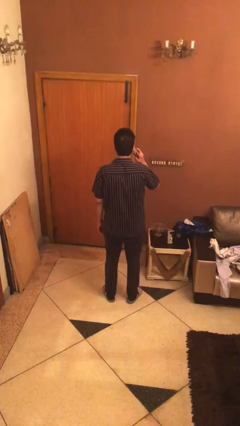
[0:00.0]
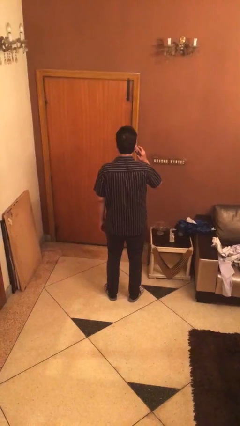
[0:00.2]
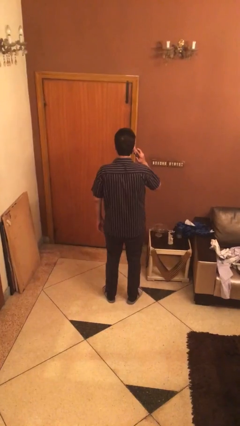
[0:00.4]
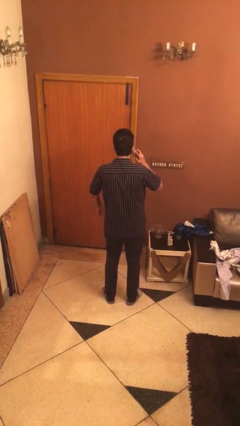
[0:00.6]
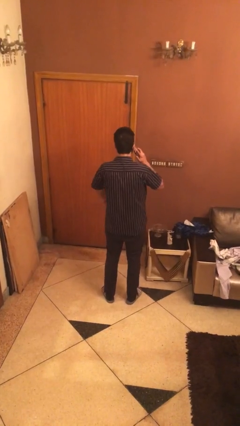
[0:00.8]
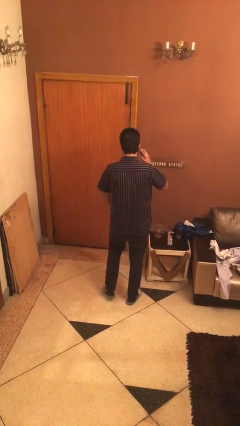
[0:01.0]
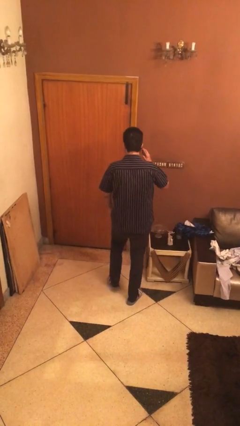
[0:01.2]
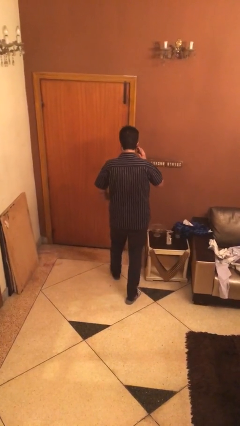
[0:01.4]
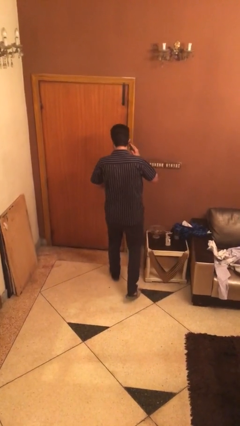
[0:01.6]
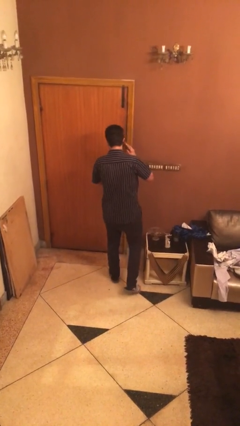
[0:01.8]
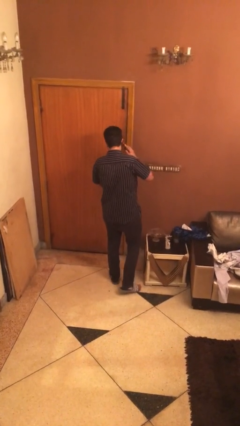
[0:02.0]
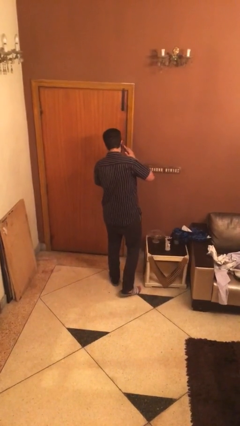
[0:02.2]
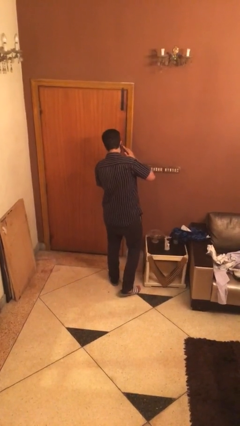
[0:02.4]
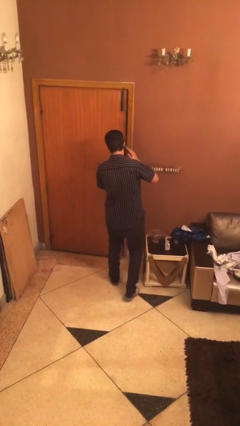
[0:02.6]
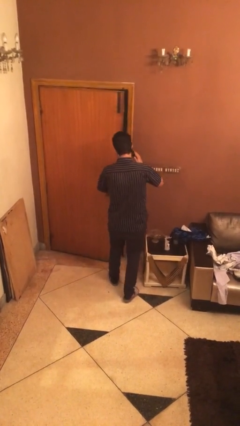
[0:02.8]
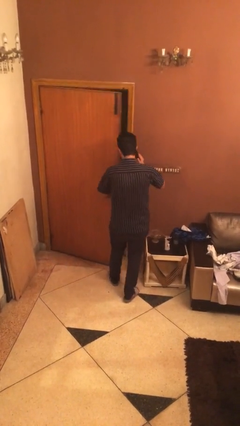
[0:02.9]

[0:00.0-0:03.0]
person opens facility door

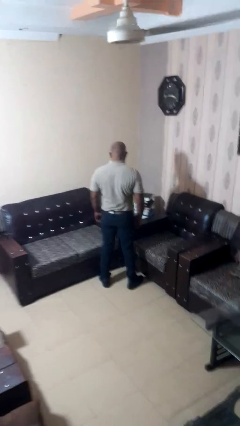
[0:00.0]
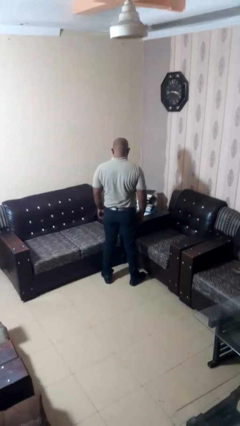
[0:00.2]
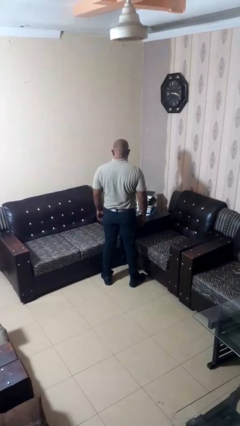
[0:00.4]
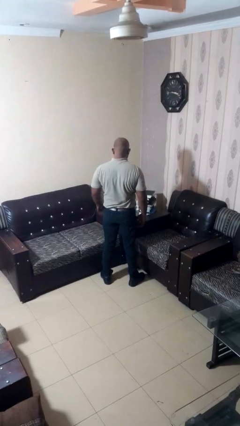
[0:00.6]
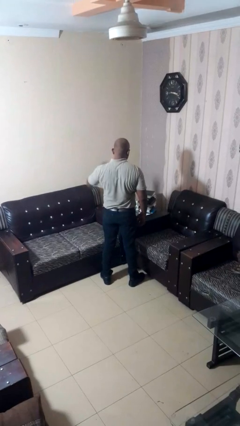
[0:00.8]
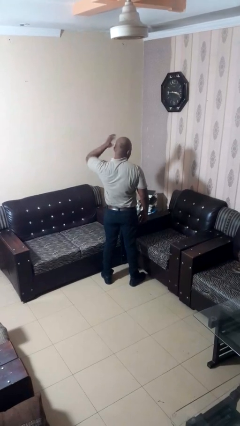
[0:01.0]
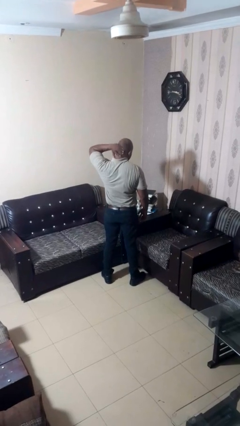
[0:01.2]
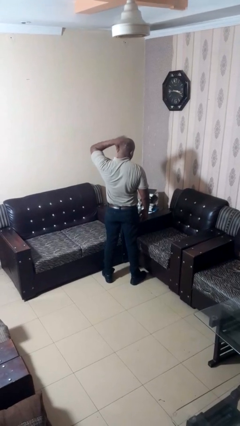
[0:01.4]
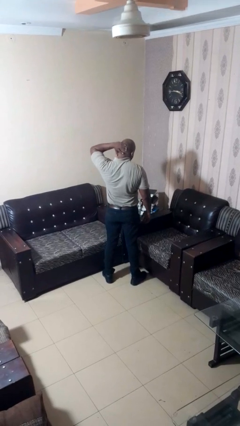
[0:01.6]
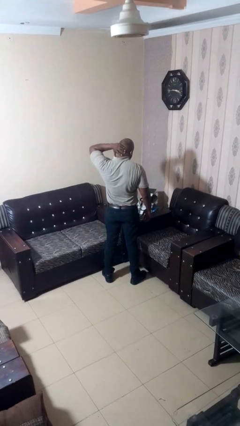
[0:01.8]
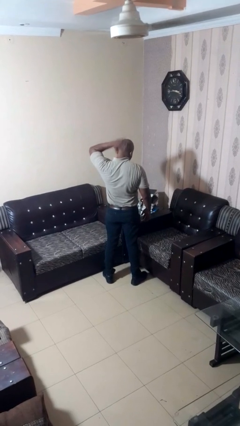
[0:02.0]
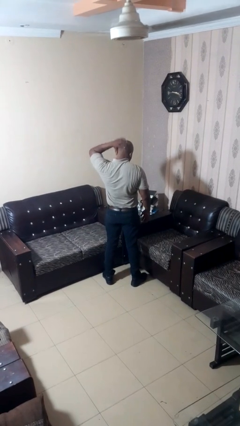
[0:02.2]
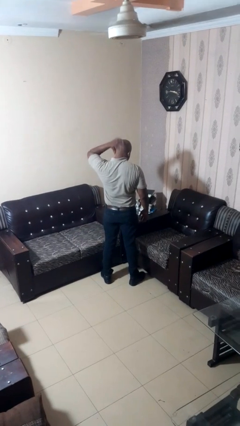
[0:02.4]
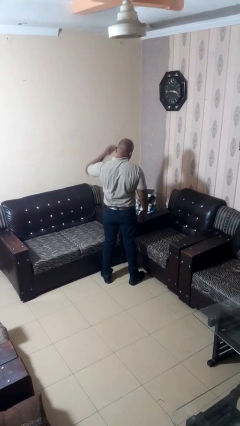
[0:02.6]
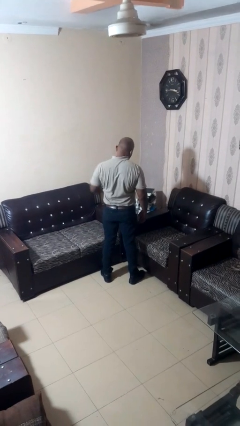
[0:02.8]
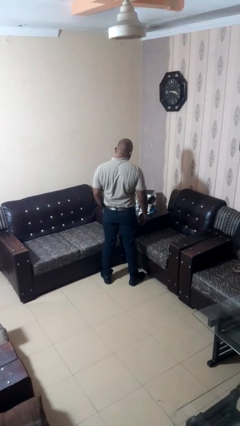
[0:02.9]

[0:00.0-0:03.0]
person rubs neck

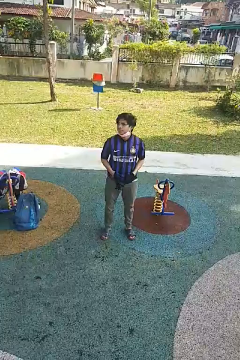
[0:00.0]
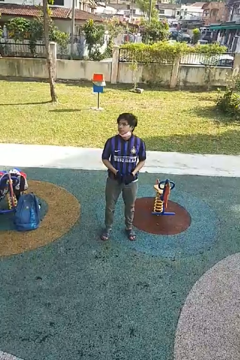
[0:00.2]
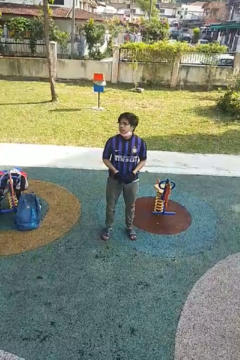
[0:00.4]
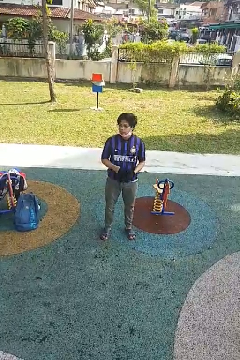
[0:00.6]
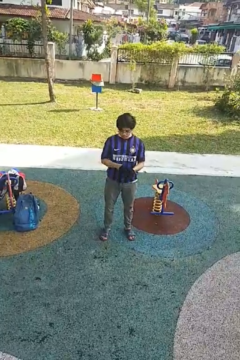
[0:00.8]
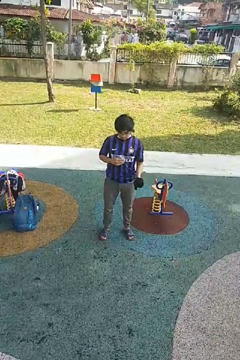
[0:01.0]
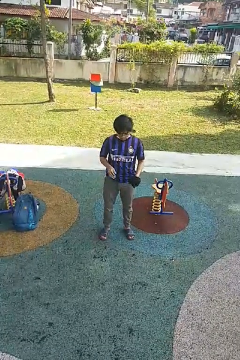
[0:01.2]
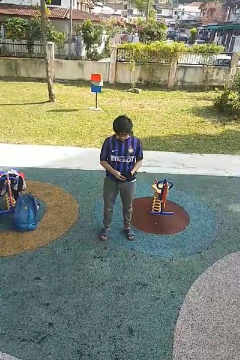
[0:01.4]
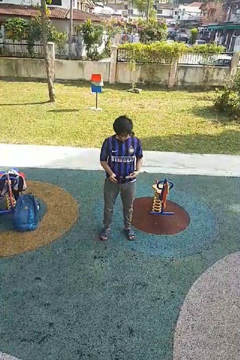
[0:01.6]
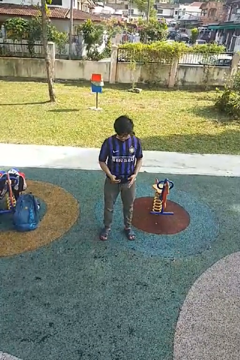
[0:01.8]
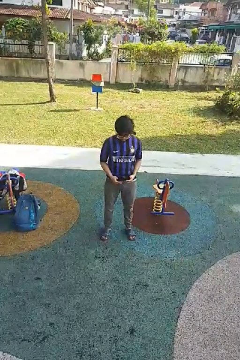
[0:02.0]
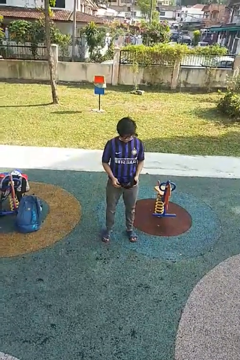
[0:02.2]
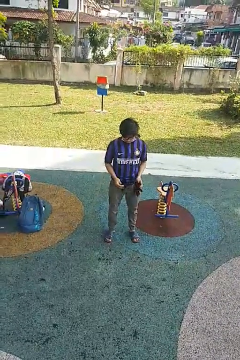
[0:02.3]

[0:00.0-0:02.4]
person takes off gloves

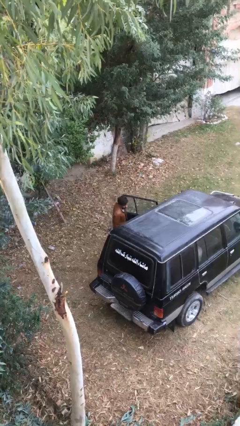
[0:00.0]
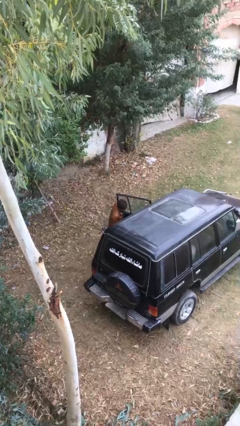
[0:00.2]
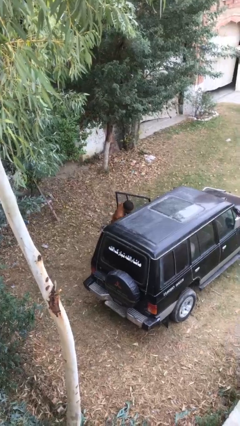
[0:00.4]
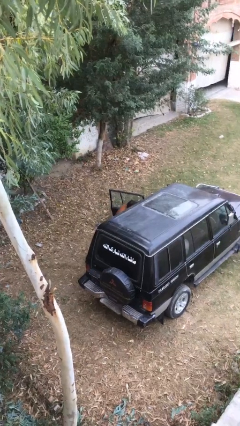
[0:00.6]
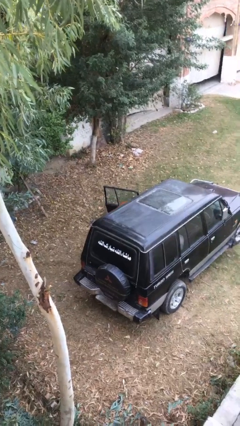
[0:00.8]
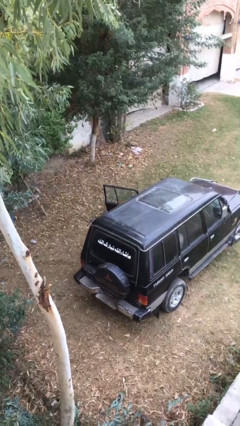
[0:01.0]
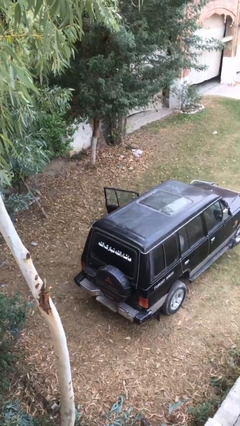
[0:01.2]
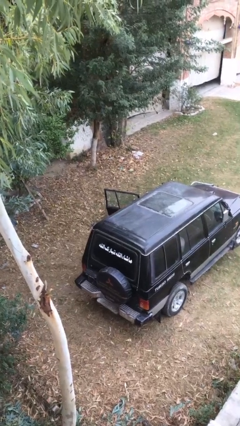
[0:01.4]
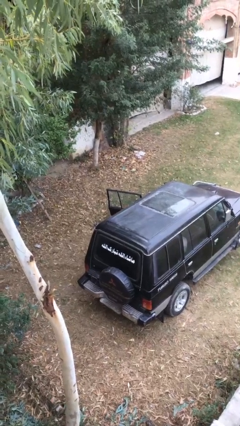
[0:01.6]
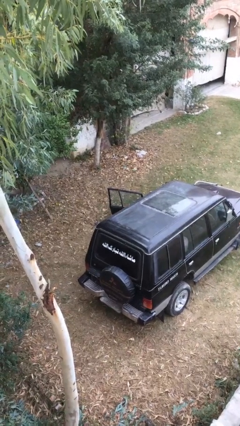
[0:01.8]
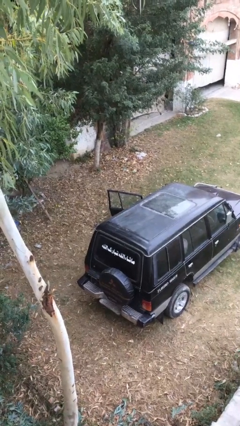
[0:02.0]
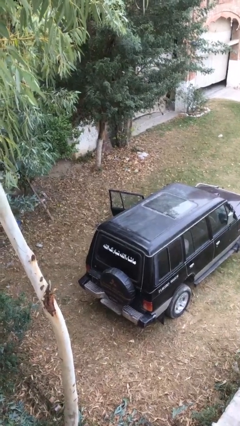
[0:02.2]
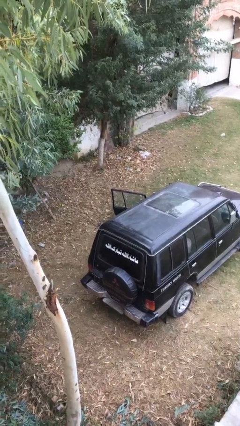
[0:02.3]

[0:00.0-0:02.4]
person enters car

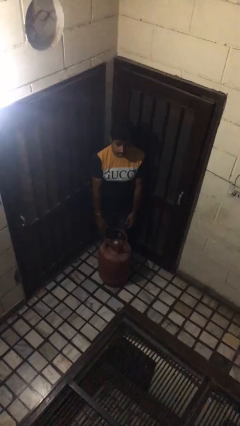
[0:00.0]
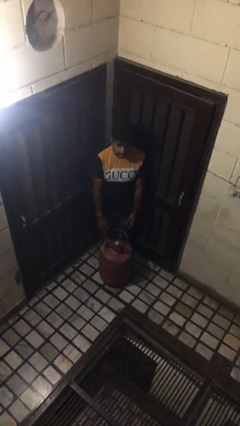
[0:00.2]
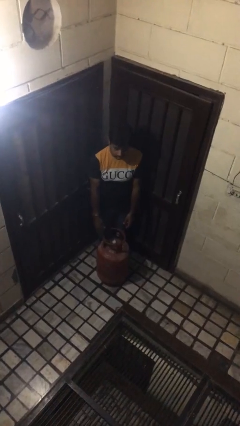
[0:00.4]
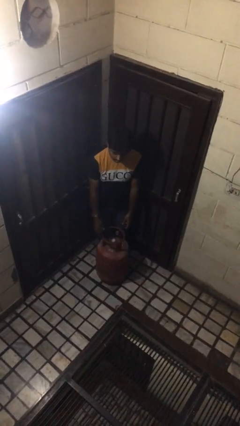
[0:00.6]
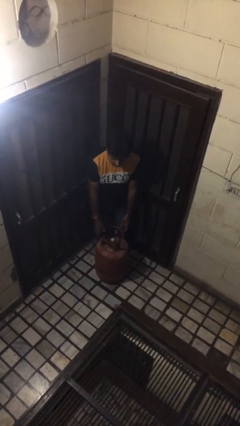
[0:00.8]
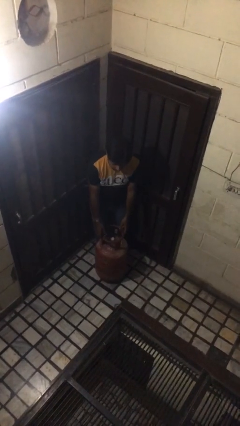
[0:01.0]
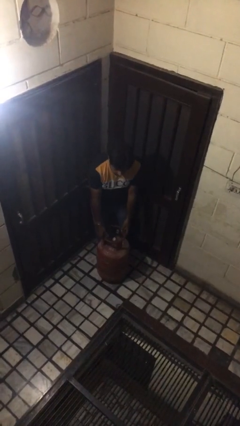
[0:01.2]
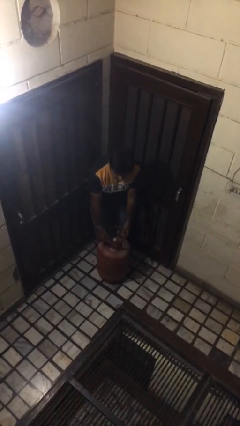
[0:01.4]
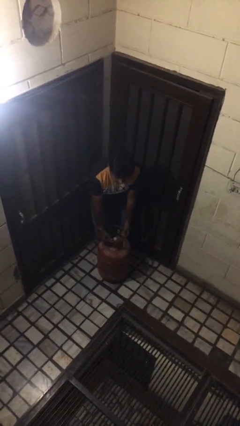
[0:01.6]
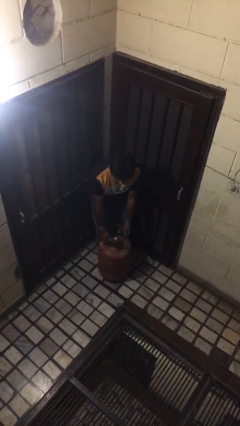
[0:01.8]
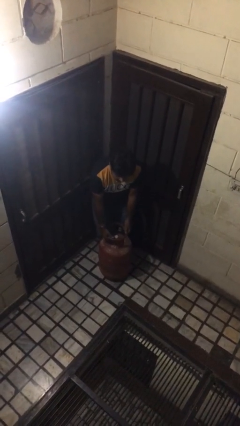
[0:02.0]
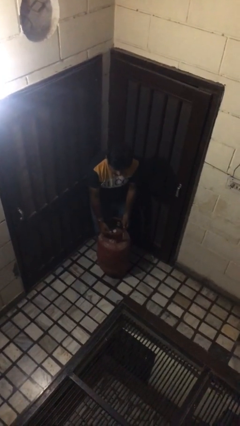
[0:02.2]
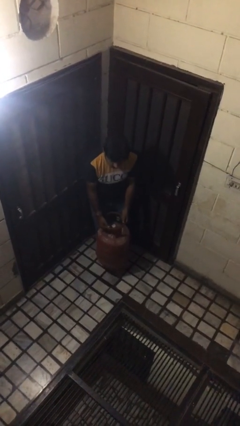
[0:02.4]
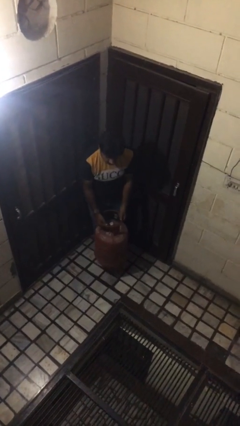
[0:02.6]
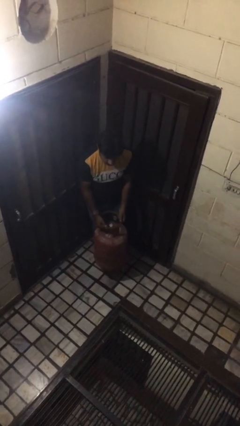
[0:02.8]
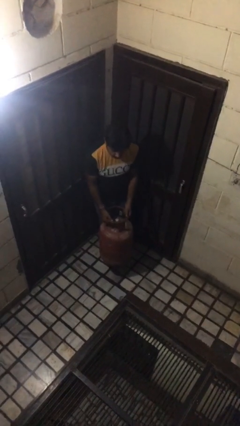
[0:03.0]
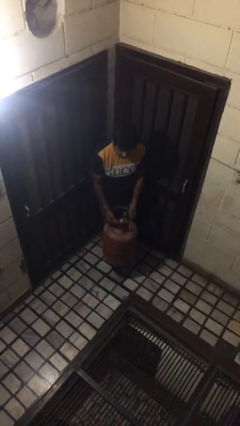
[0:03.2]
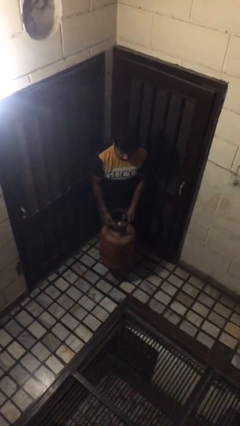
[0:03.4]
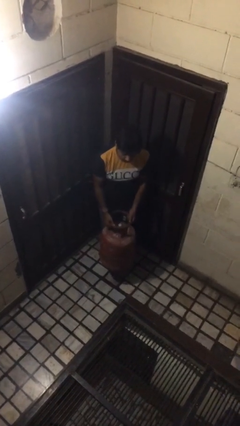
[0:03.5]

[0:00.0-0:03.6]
person picks up object from floor

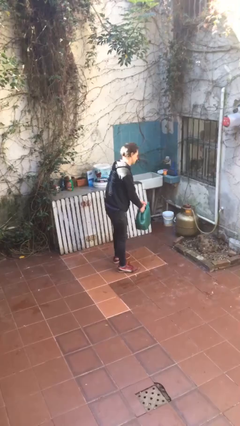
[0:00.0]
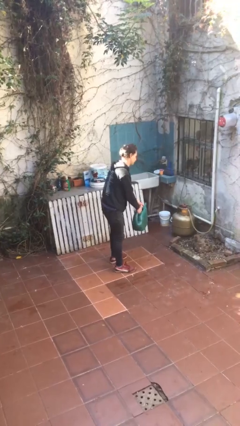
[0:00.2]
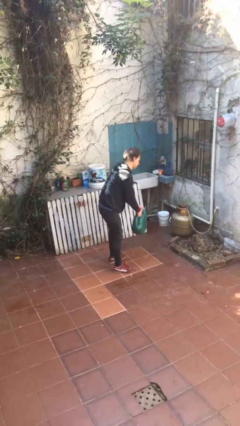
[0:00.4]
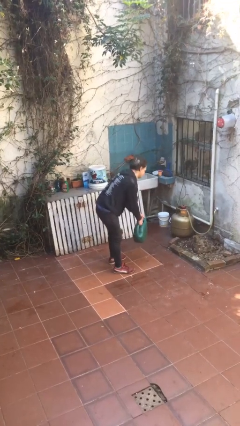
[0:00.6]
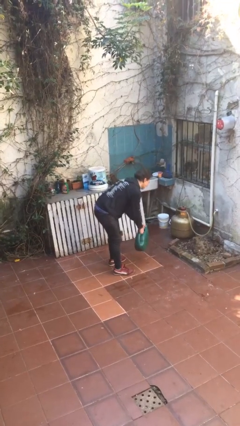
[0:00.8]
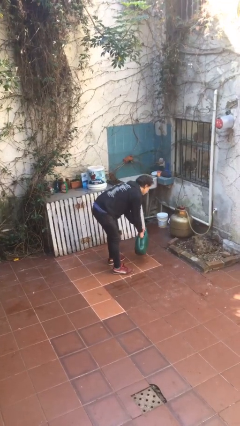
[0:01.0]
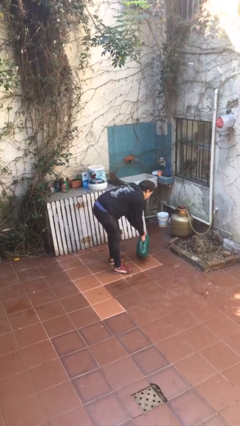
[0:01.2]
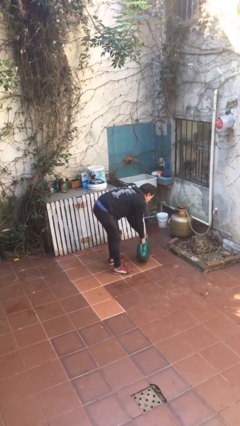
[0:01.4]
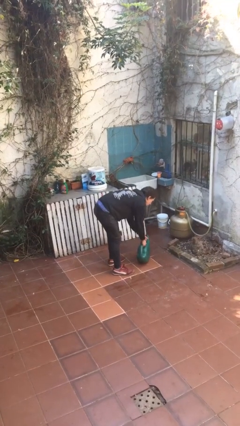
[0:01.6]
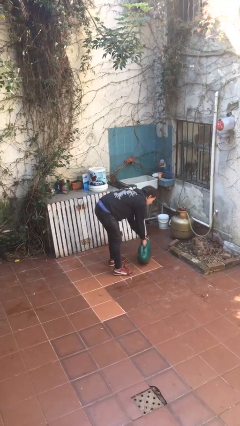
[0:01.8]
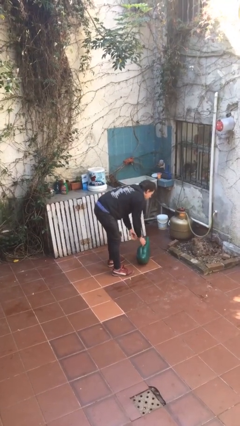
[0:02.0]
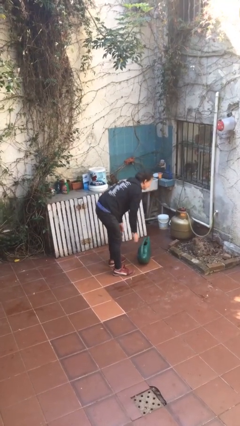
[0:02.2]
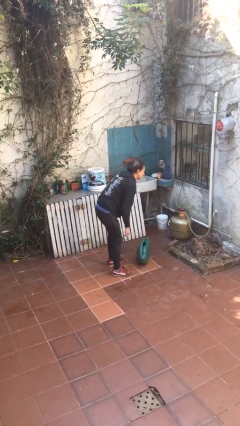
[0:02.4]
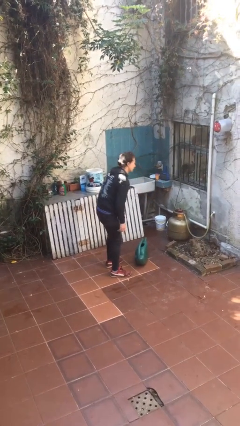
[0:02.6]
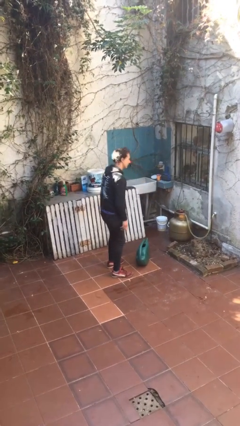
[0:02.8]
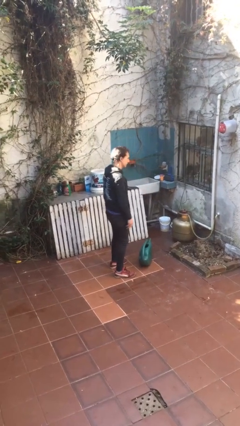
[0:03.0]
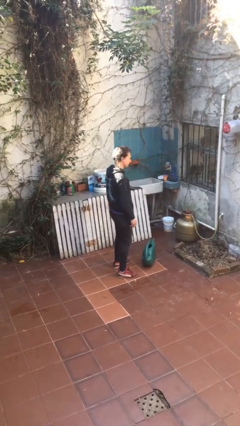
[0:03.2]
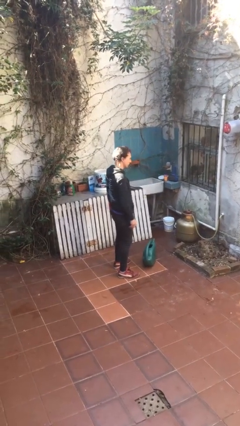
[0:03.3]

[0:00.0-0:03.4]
person puts down object on floor
